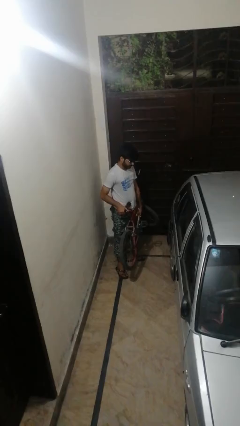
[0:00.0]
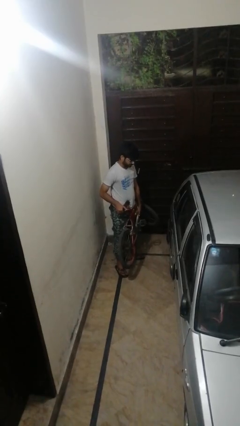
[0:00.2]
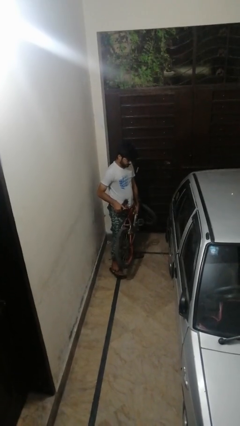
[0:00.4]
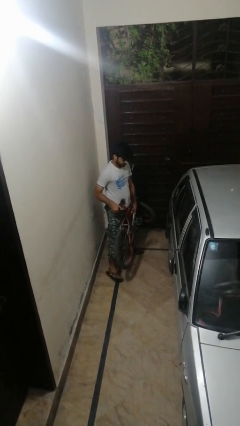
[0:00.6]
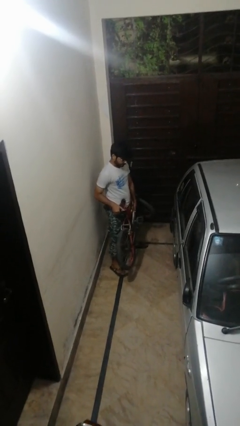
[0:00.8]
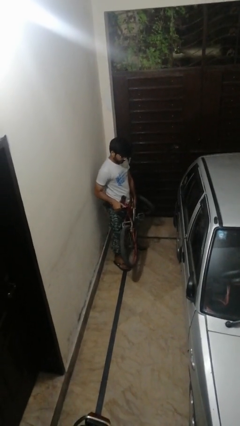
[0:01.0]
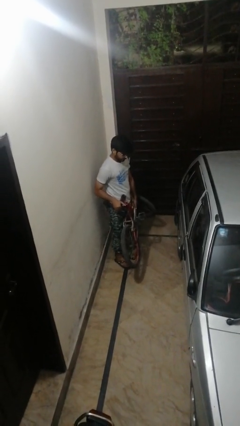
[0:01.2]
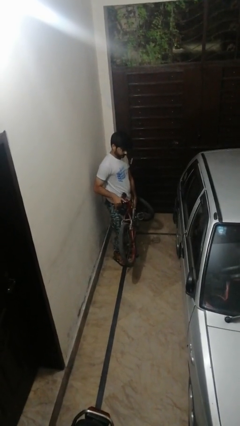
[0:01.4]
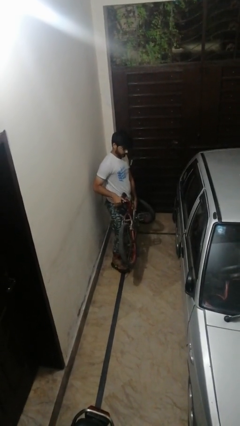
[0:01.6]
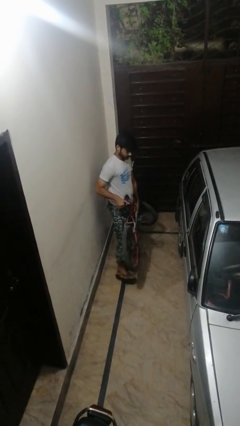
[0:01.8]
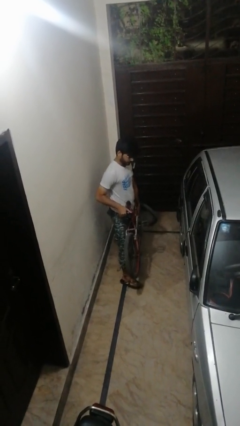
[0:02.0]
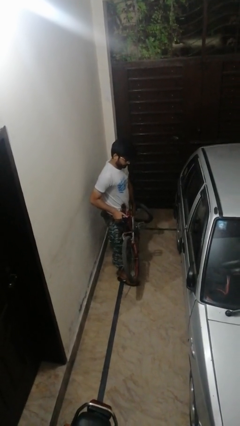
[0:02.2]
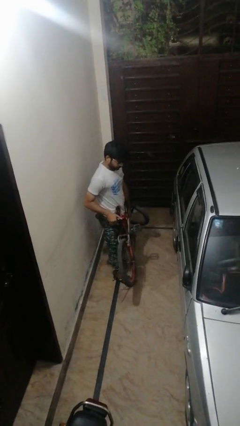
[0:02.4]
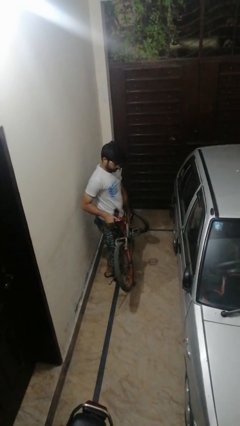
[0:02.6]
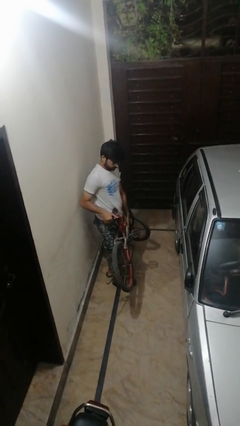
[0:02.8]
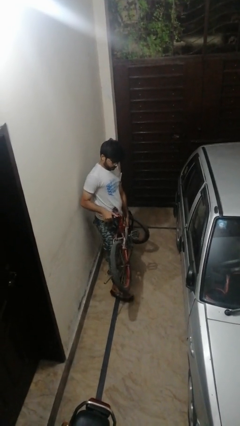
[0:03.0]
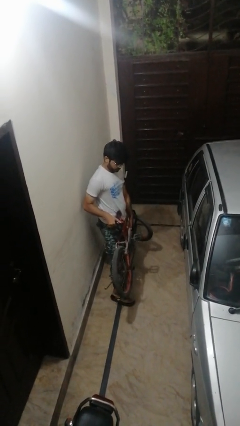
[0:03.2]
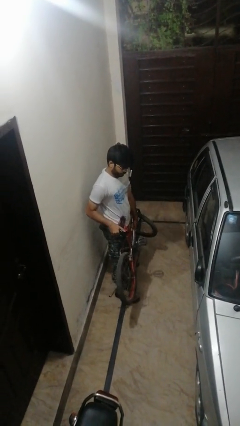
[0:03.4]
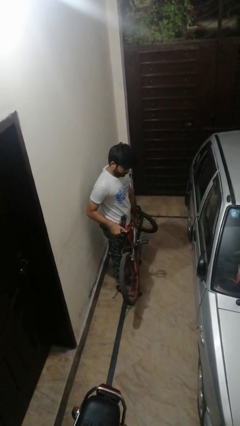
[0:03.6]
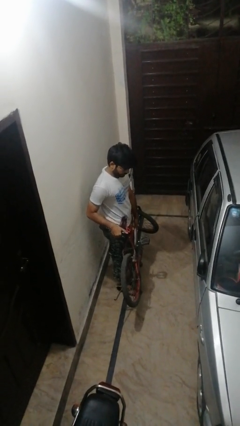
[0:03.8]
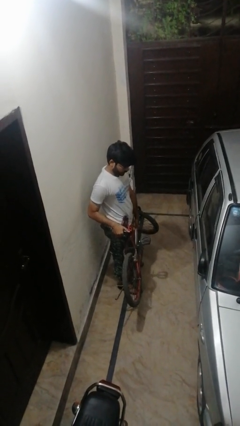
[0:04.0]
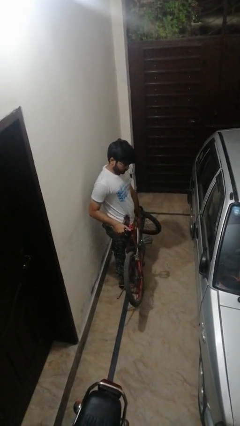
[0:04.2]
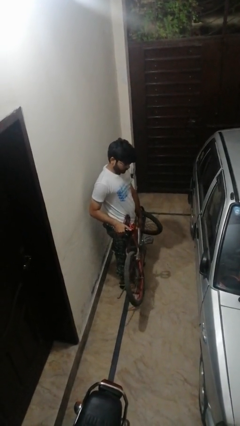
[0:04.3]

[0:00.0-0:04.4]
person carries bicycle

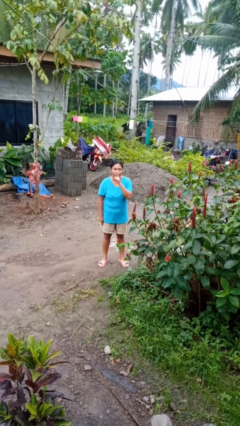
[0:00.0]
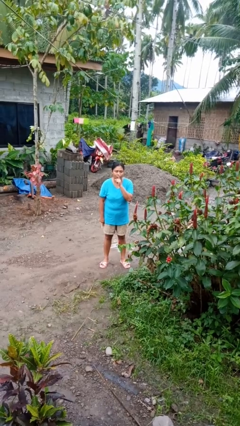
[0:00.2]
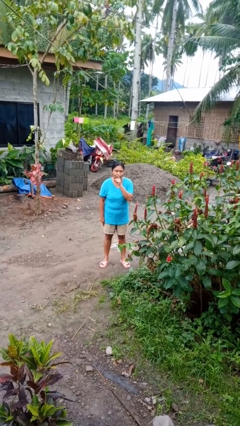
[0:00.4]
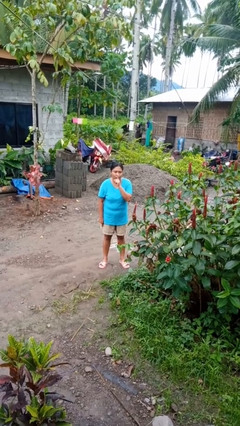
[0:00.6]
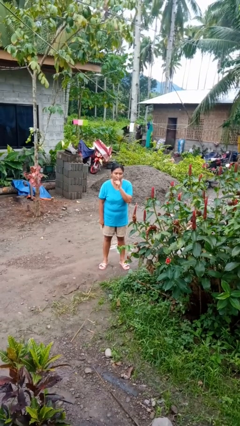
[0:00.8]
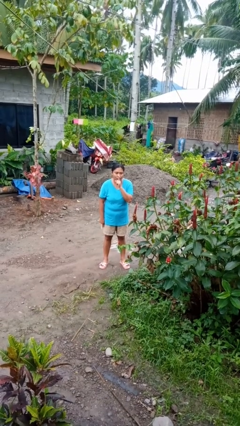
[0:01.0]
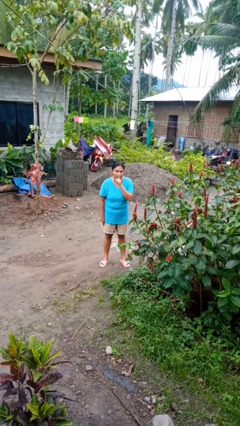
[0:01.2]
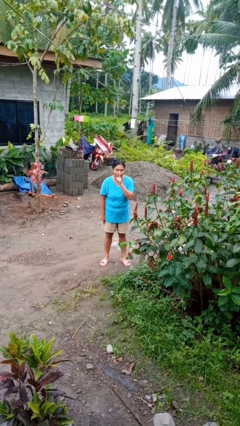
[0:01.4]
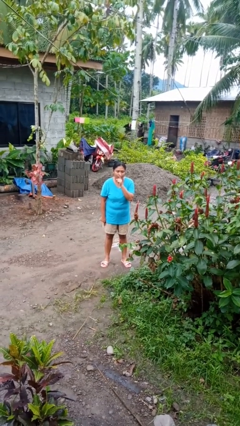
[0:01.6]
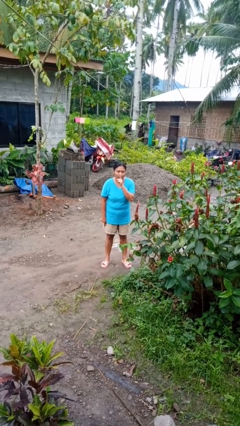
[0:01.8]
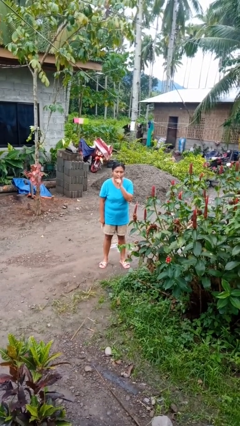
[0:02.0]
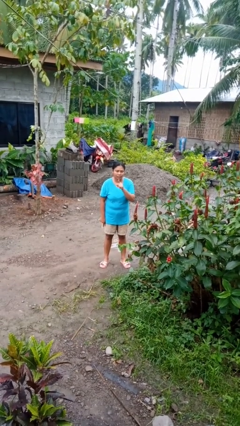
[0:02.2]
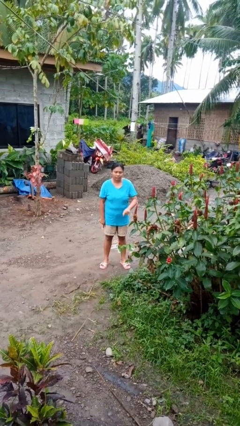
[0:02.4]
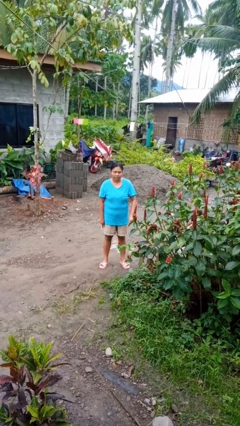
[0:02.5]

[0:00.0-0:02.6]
person gestures be quiet

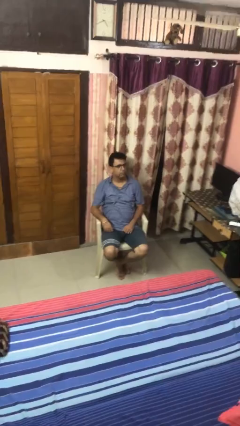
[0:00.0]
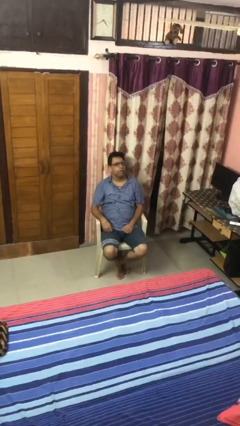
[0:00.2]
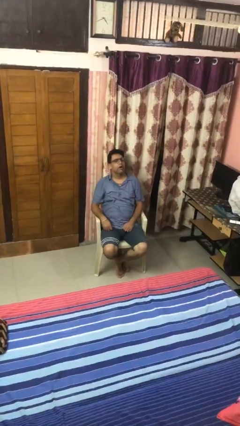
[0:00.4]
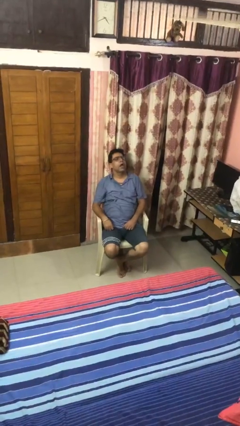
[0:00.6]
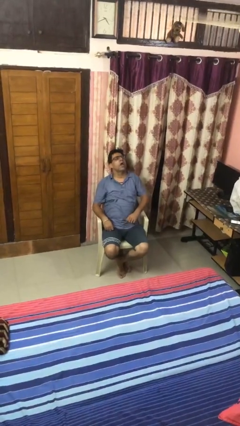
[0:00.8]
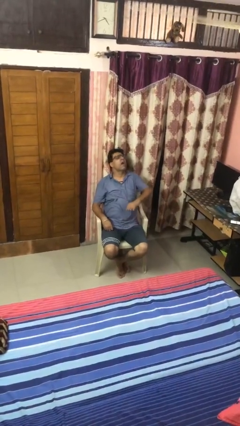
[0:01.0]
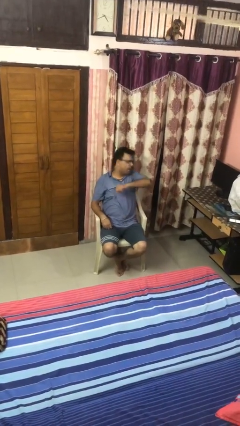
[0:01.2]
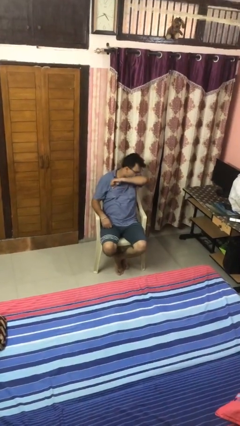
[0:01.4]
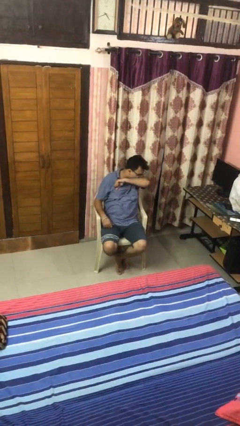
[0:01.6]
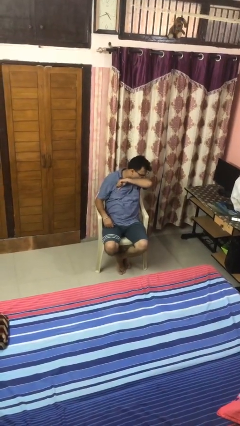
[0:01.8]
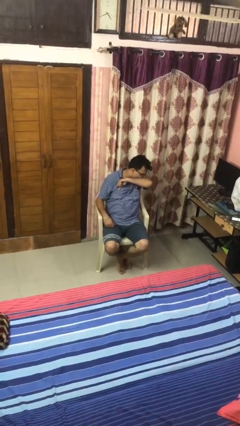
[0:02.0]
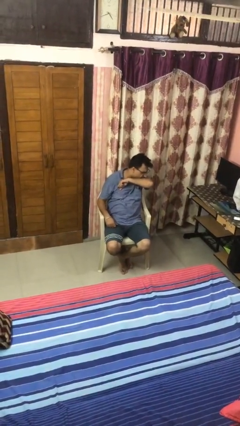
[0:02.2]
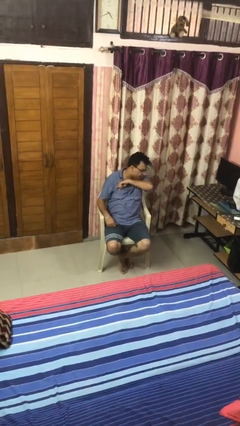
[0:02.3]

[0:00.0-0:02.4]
person sneezes into arm

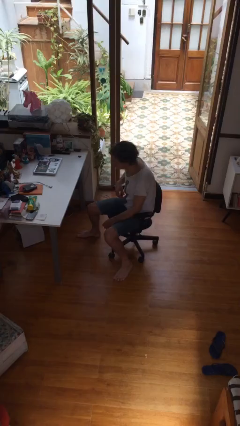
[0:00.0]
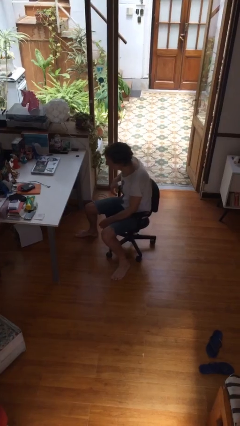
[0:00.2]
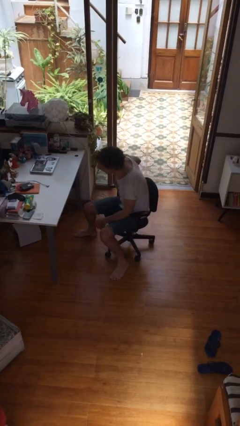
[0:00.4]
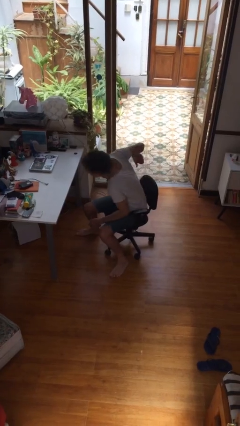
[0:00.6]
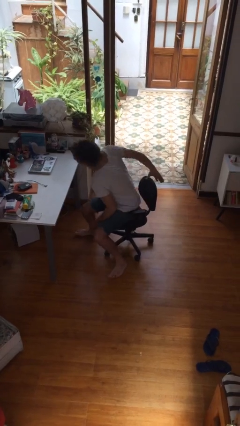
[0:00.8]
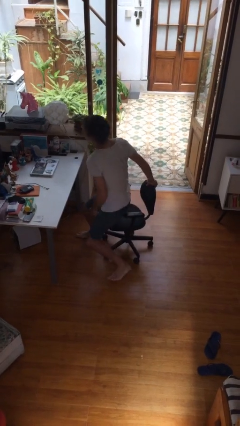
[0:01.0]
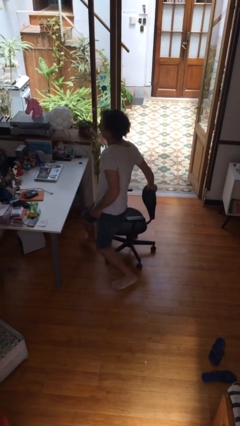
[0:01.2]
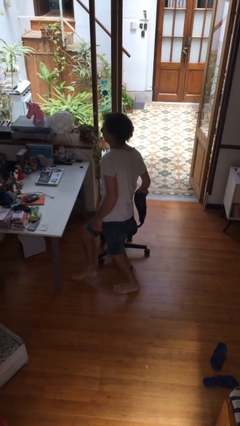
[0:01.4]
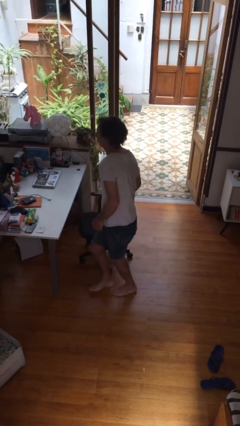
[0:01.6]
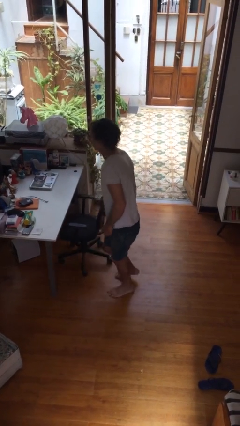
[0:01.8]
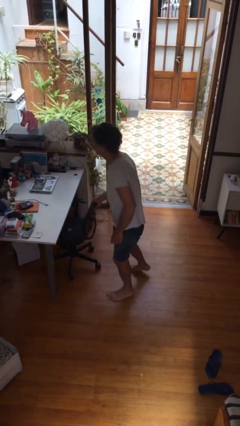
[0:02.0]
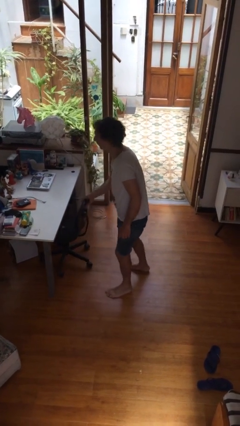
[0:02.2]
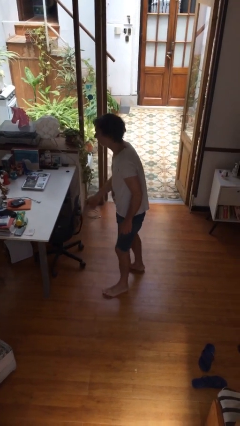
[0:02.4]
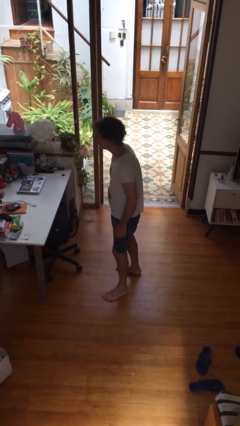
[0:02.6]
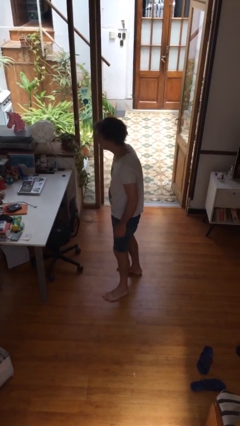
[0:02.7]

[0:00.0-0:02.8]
person stands up

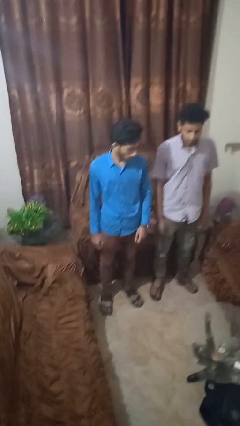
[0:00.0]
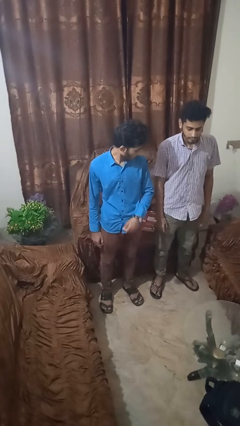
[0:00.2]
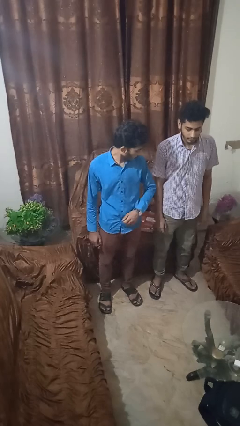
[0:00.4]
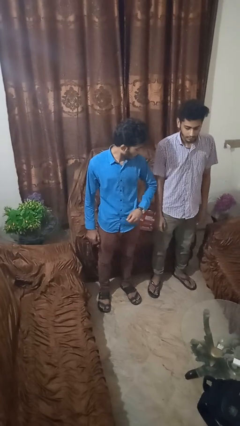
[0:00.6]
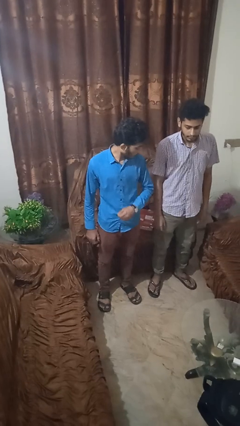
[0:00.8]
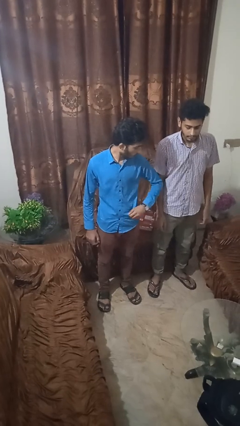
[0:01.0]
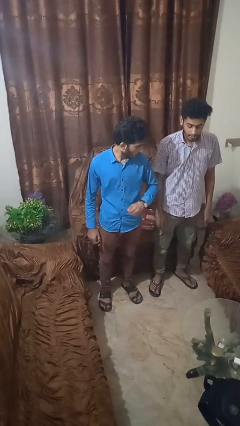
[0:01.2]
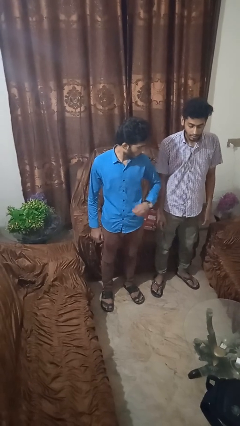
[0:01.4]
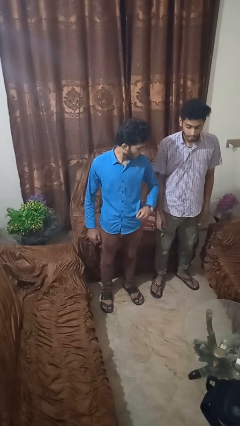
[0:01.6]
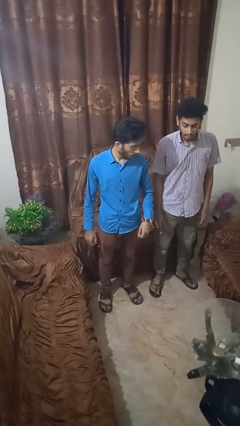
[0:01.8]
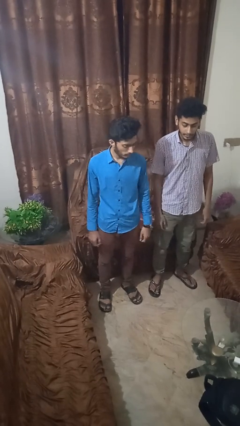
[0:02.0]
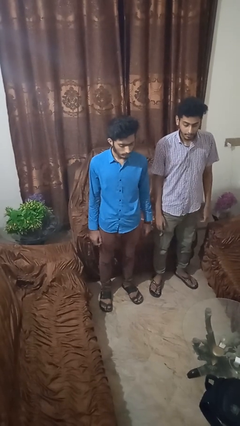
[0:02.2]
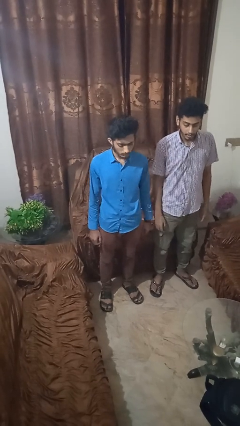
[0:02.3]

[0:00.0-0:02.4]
person nudges person with elbow

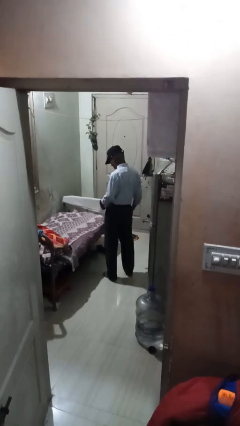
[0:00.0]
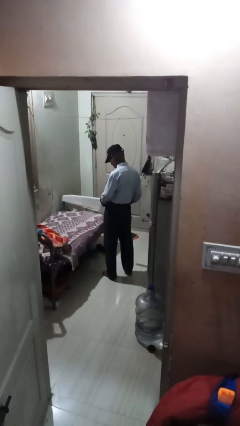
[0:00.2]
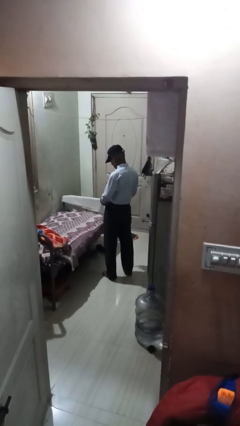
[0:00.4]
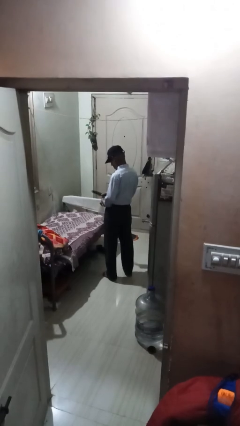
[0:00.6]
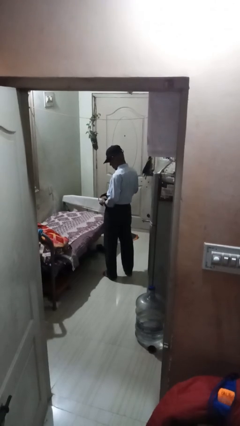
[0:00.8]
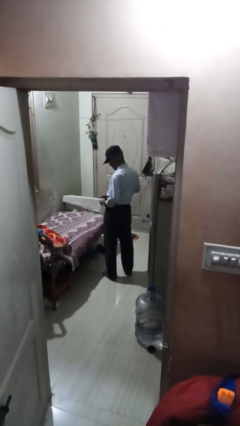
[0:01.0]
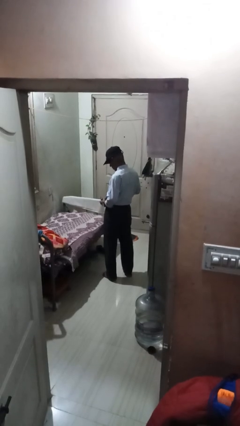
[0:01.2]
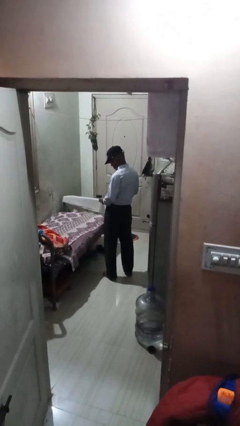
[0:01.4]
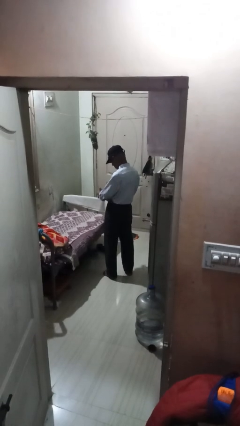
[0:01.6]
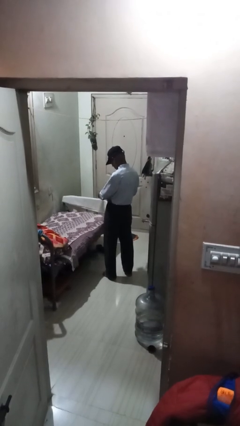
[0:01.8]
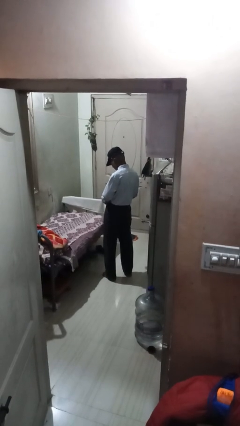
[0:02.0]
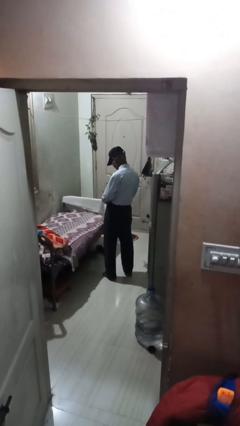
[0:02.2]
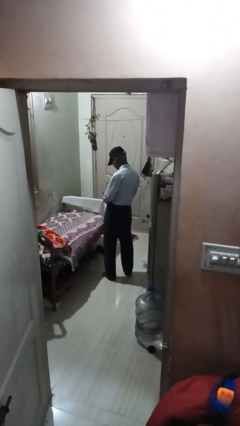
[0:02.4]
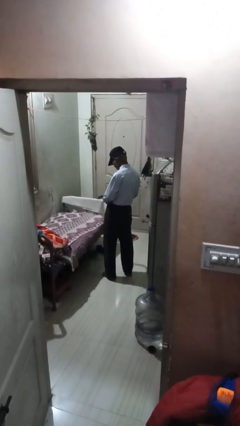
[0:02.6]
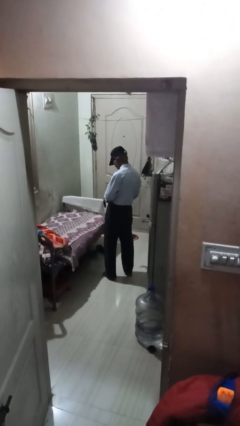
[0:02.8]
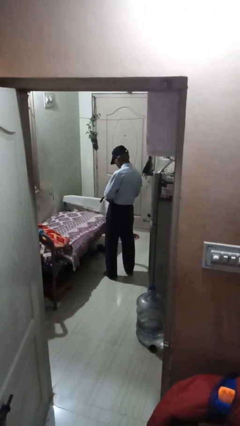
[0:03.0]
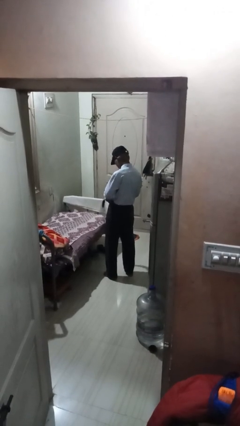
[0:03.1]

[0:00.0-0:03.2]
person puts on belt
